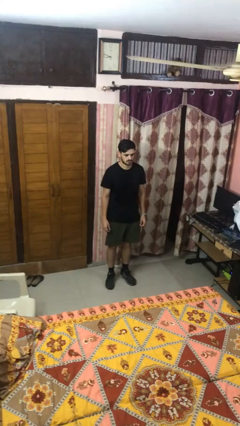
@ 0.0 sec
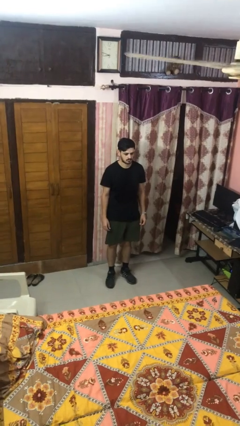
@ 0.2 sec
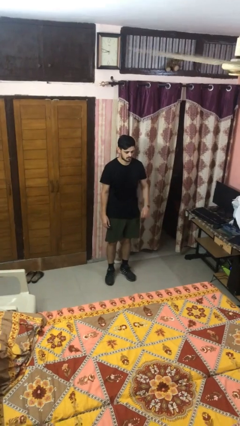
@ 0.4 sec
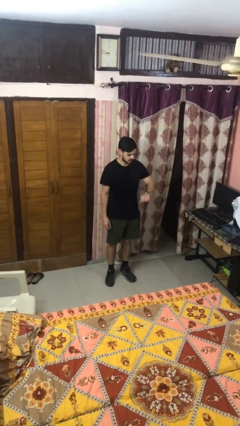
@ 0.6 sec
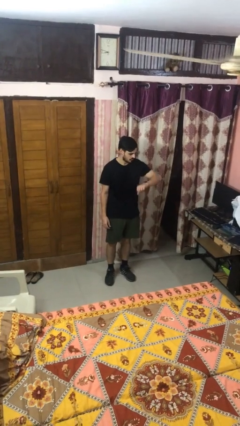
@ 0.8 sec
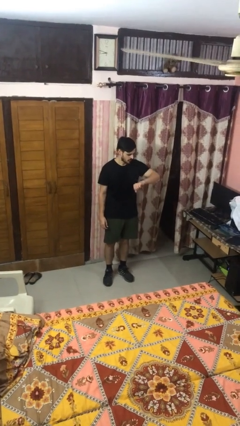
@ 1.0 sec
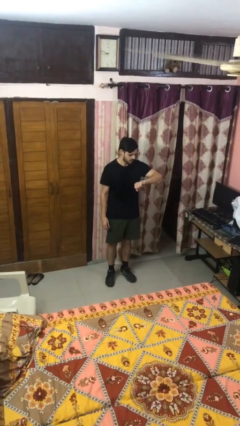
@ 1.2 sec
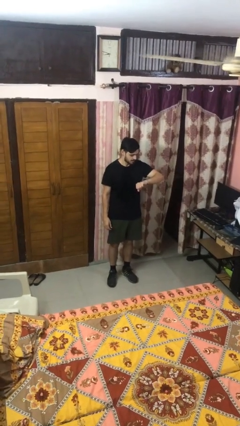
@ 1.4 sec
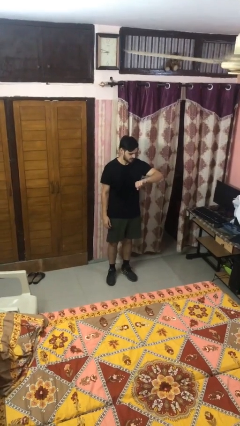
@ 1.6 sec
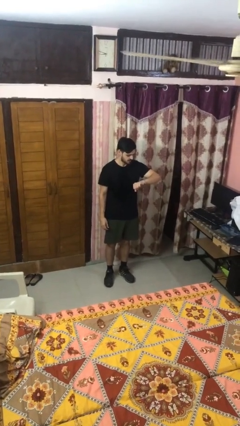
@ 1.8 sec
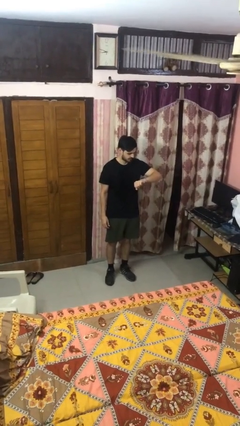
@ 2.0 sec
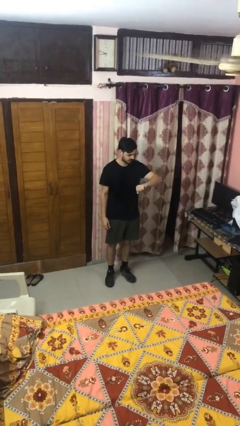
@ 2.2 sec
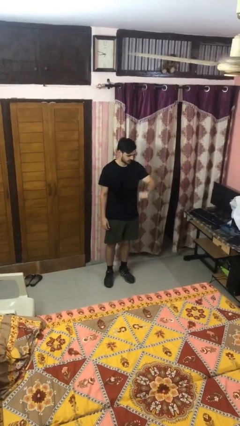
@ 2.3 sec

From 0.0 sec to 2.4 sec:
person looks at wristwatch

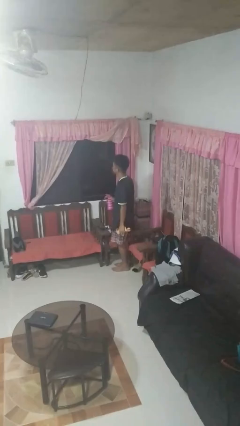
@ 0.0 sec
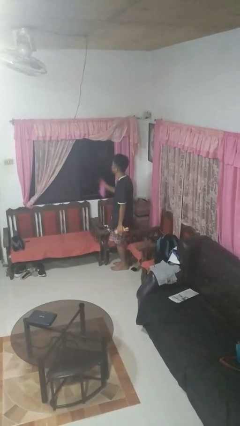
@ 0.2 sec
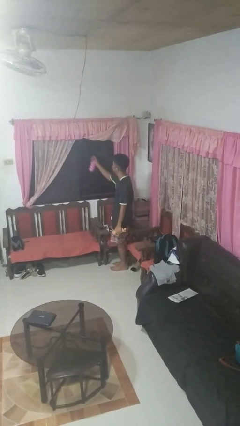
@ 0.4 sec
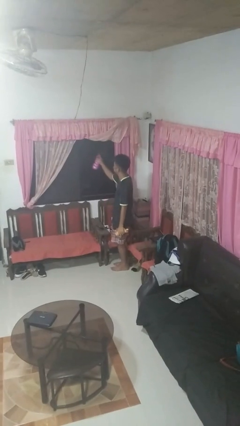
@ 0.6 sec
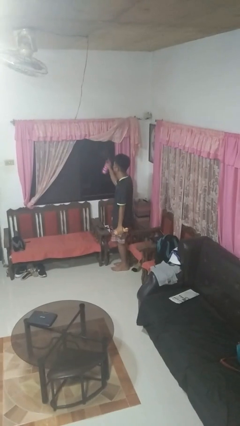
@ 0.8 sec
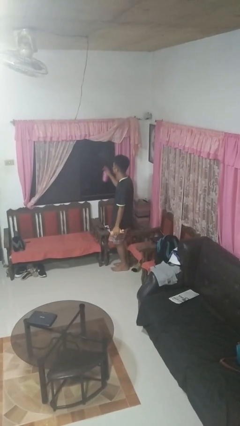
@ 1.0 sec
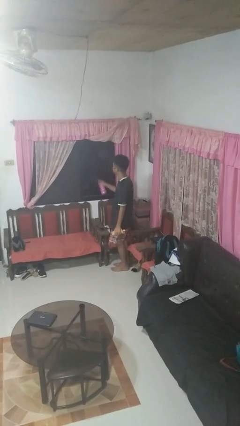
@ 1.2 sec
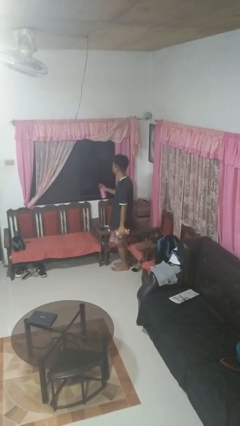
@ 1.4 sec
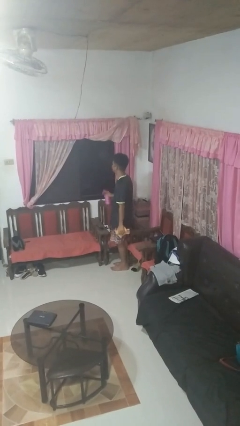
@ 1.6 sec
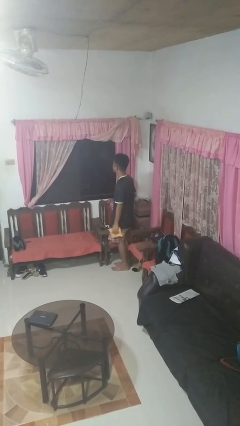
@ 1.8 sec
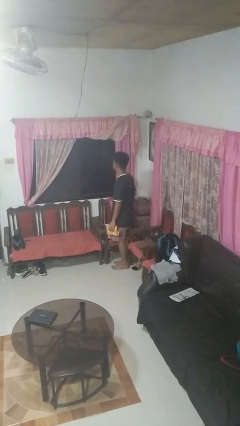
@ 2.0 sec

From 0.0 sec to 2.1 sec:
person sprays from bottle

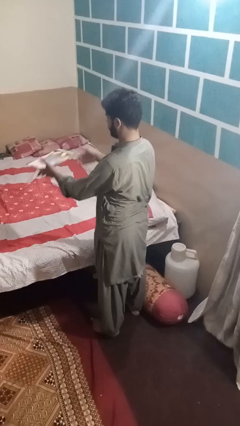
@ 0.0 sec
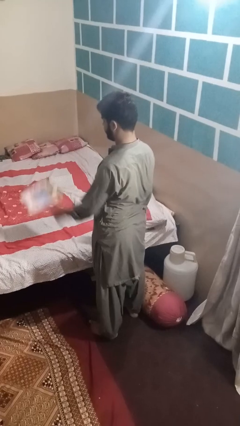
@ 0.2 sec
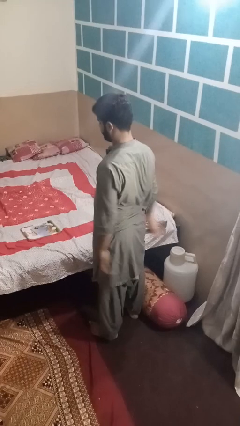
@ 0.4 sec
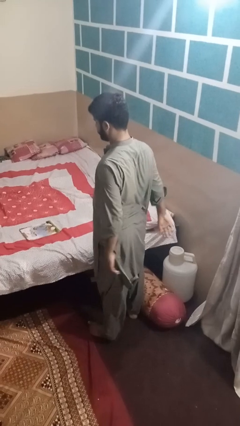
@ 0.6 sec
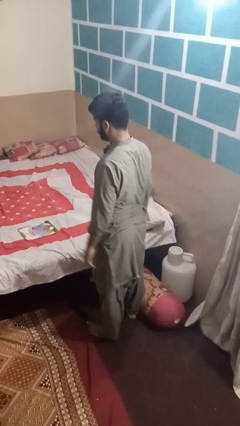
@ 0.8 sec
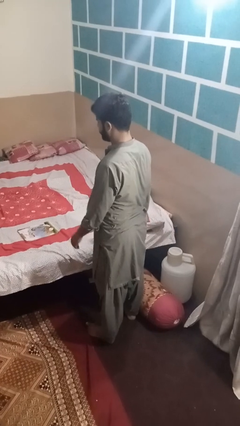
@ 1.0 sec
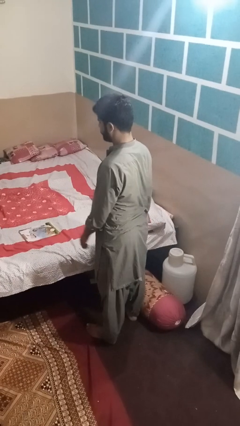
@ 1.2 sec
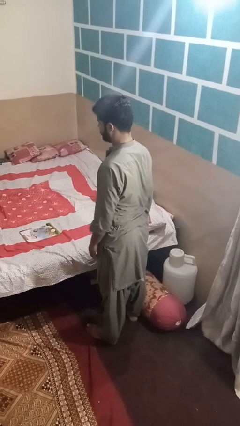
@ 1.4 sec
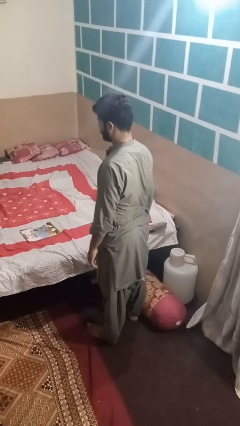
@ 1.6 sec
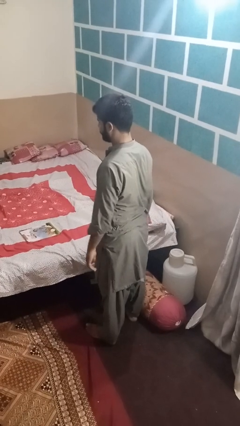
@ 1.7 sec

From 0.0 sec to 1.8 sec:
person throws object on bed

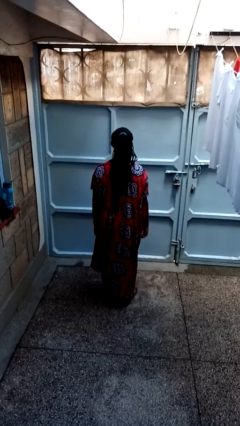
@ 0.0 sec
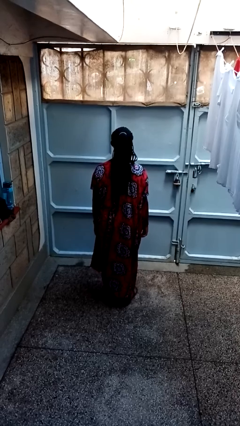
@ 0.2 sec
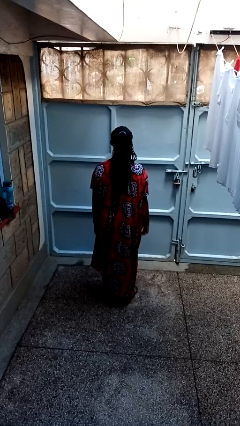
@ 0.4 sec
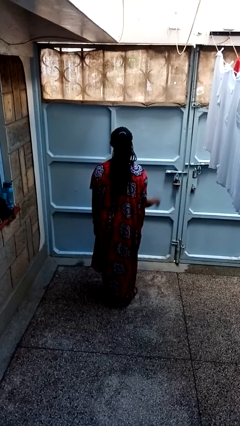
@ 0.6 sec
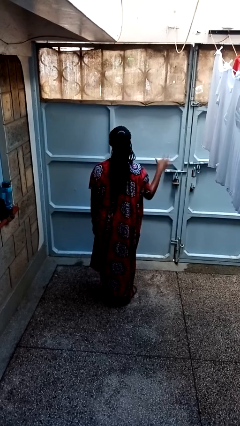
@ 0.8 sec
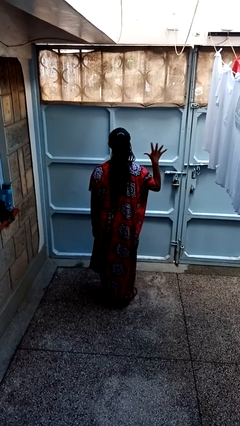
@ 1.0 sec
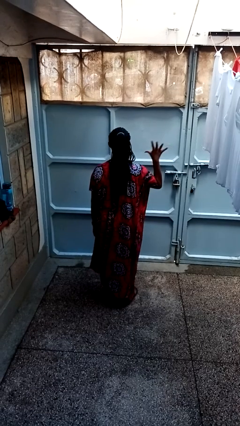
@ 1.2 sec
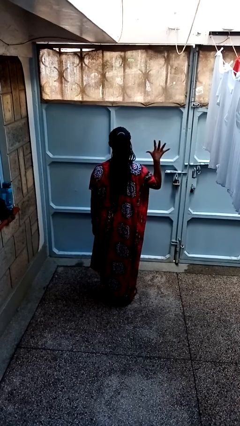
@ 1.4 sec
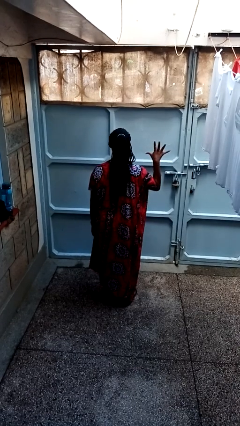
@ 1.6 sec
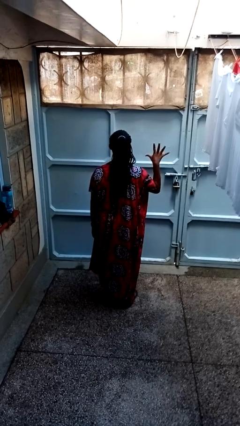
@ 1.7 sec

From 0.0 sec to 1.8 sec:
person gestures number five

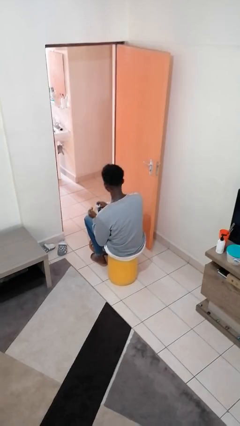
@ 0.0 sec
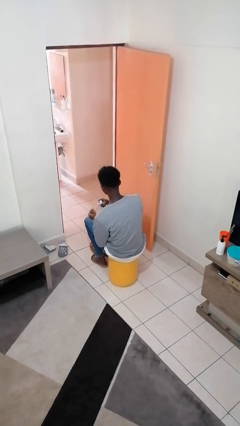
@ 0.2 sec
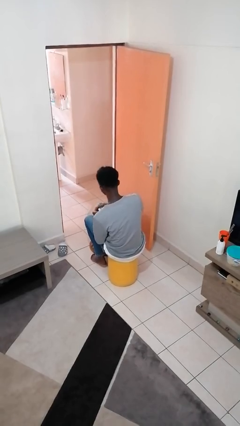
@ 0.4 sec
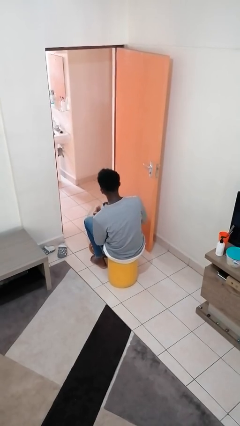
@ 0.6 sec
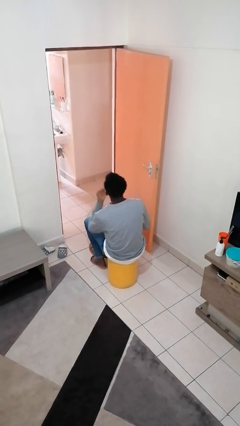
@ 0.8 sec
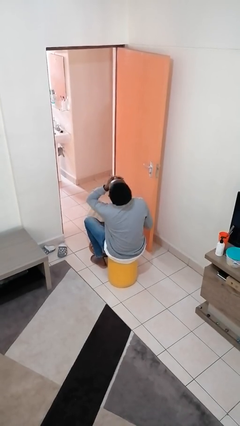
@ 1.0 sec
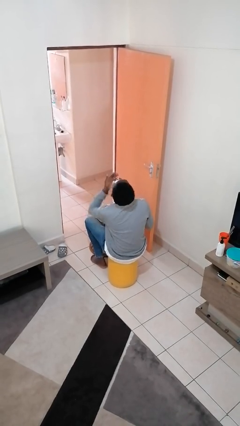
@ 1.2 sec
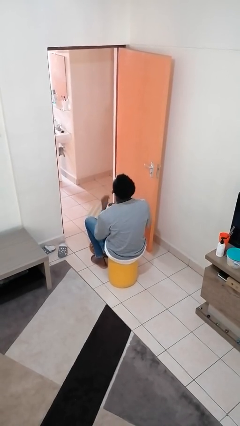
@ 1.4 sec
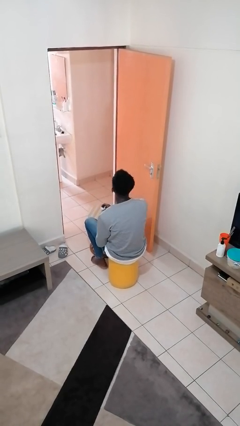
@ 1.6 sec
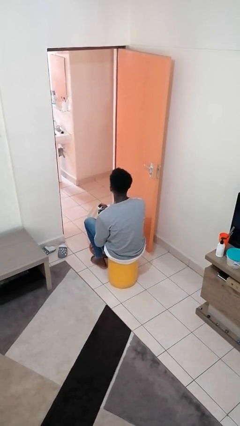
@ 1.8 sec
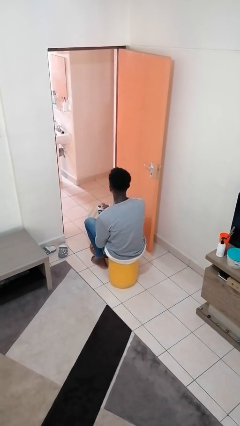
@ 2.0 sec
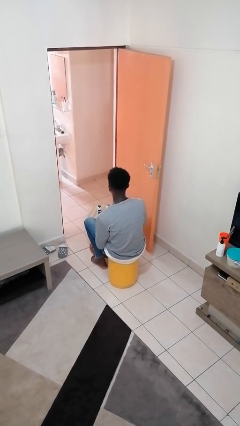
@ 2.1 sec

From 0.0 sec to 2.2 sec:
person takes medicine pills

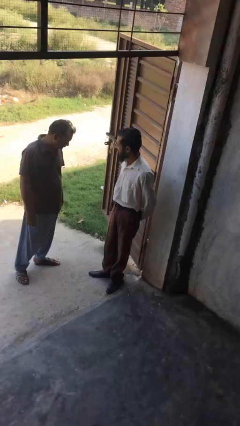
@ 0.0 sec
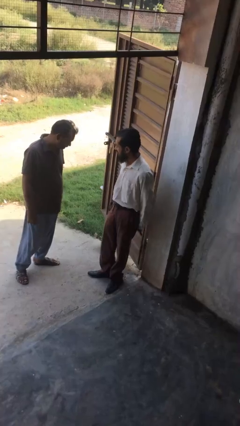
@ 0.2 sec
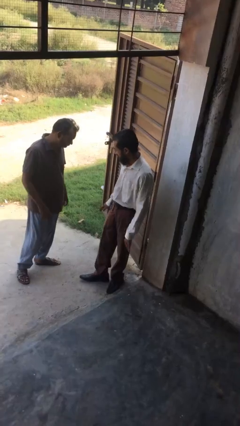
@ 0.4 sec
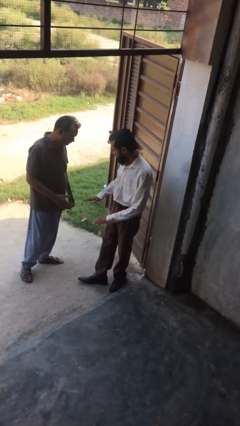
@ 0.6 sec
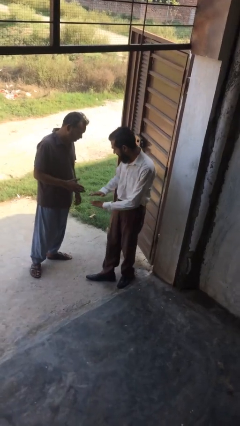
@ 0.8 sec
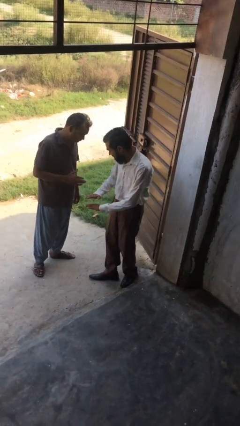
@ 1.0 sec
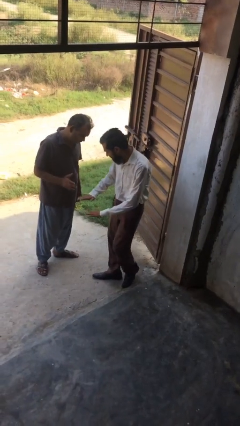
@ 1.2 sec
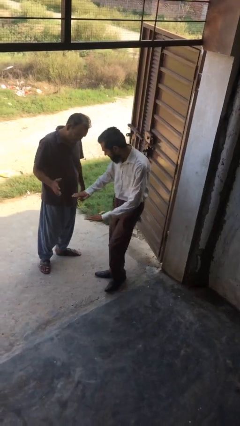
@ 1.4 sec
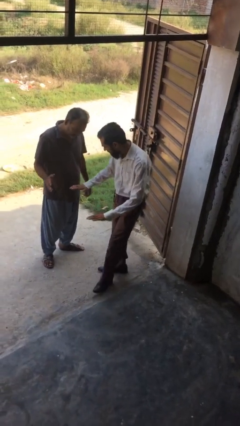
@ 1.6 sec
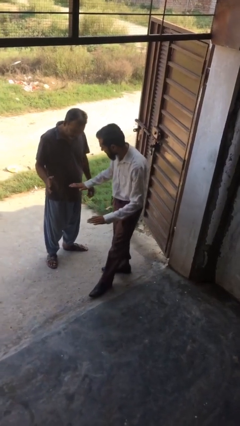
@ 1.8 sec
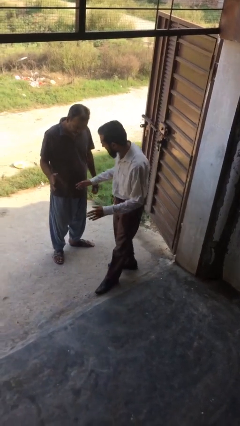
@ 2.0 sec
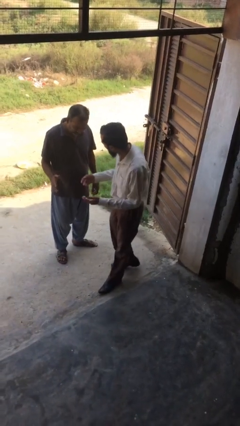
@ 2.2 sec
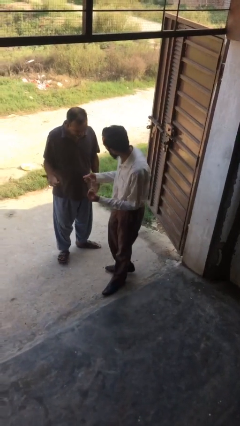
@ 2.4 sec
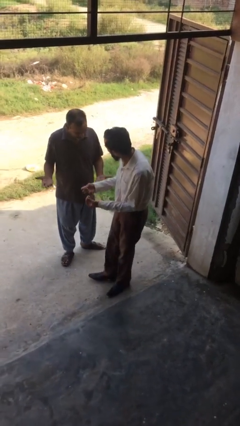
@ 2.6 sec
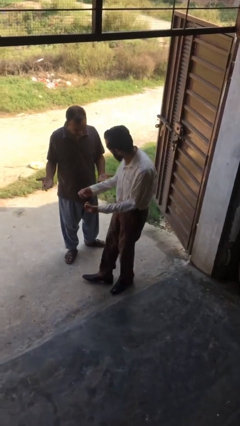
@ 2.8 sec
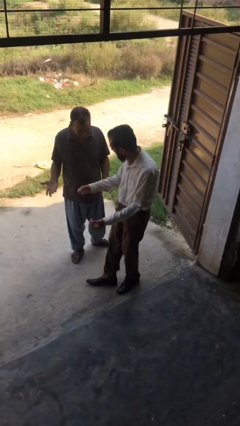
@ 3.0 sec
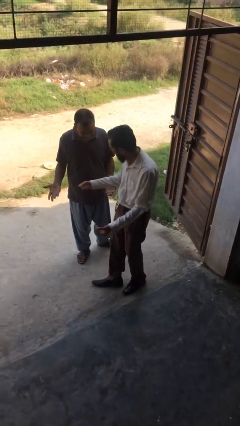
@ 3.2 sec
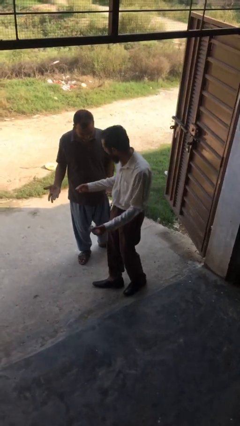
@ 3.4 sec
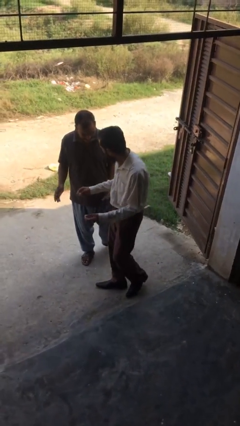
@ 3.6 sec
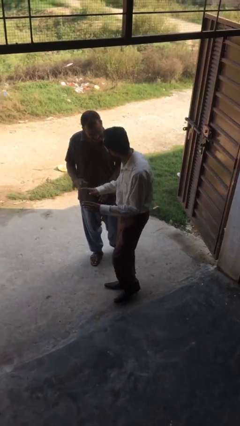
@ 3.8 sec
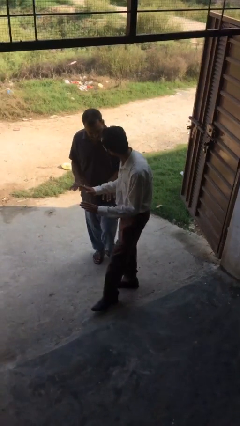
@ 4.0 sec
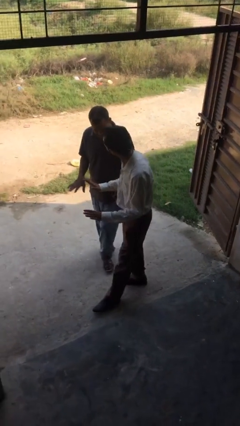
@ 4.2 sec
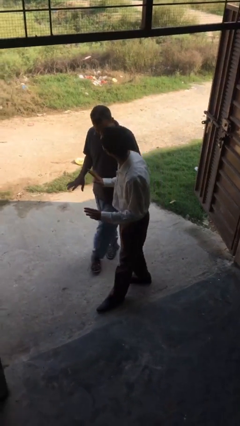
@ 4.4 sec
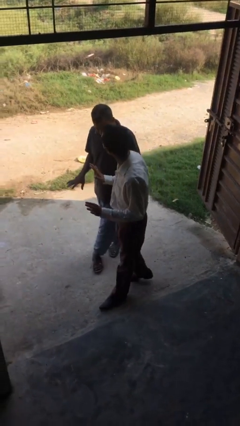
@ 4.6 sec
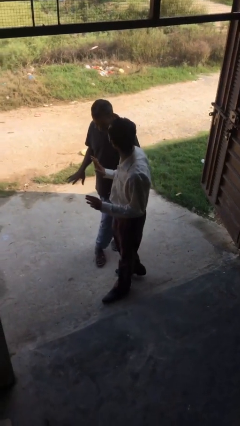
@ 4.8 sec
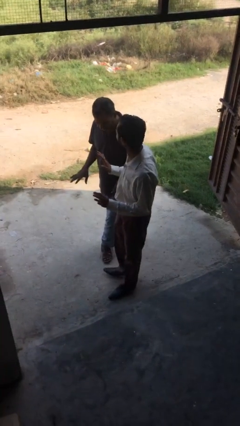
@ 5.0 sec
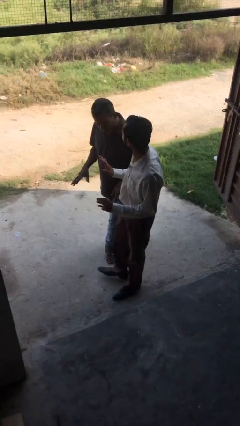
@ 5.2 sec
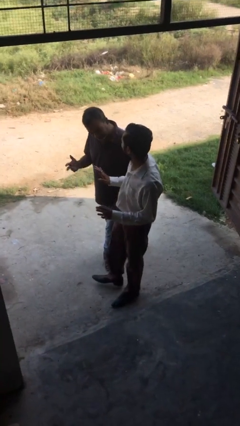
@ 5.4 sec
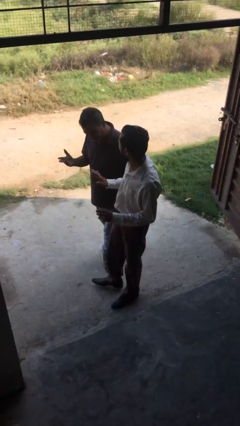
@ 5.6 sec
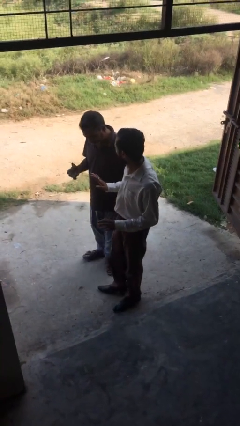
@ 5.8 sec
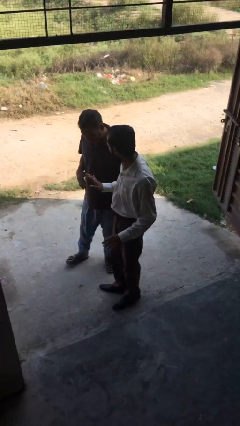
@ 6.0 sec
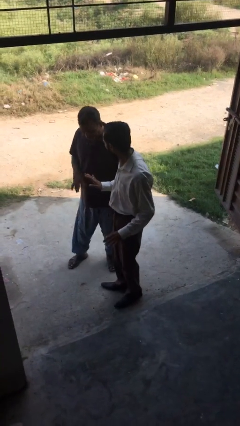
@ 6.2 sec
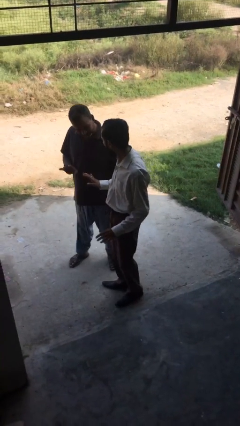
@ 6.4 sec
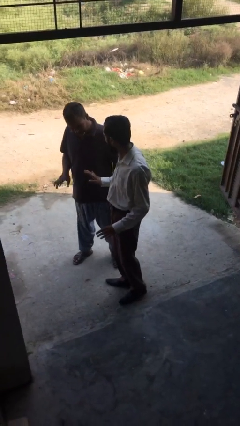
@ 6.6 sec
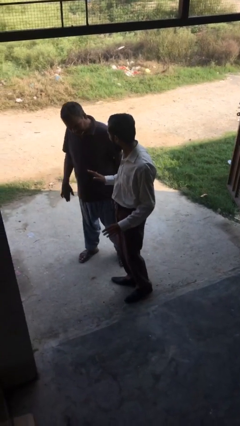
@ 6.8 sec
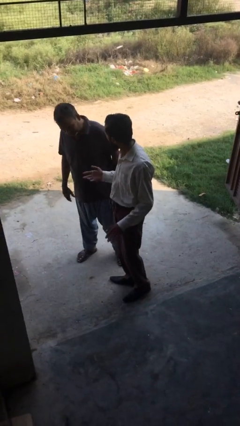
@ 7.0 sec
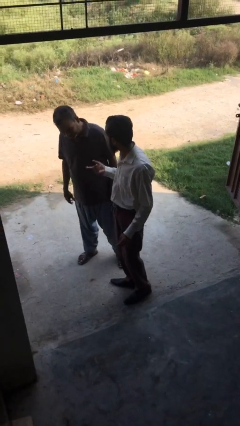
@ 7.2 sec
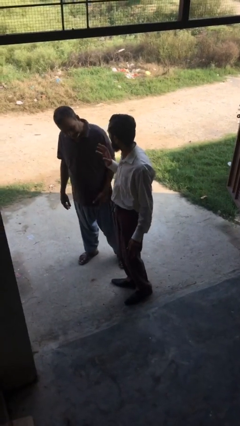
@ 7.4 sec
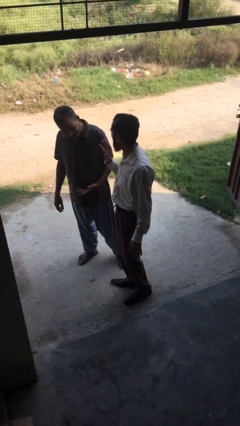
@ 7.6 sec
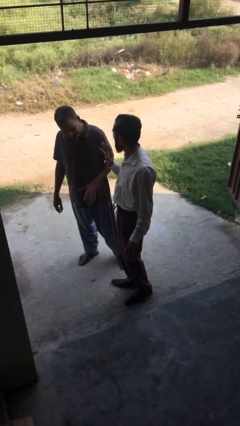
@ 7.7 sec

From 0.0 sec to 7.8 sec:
person talks to person
